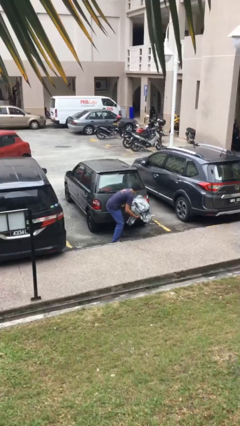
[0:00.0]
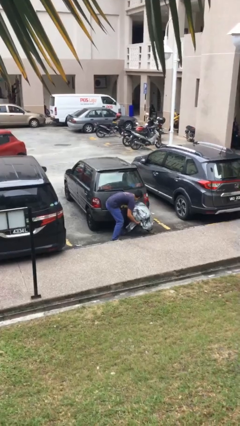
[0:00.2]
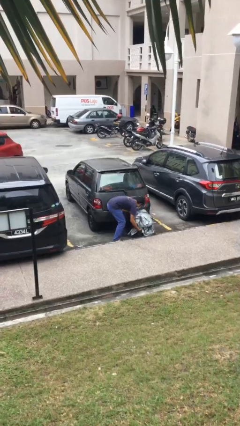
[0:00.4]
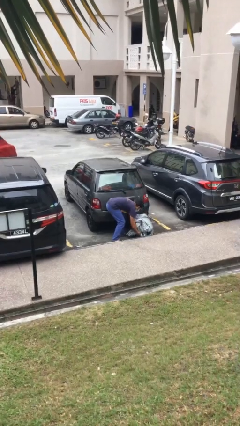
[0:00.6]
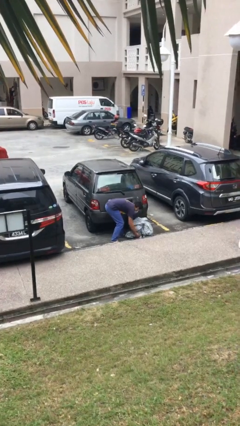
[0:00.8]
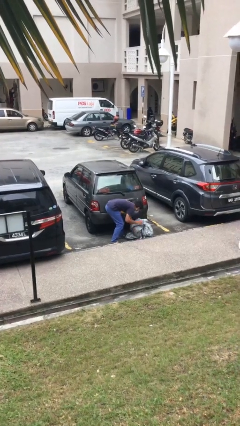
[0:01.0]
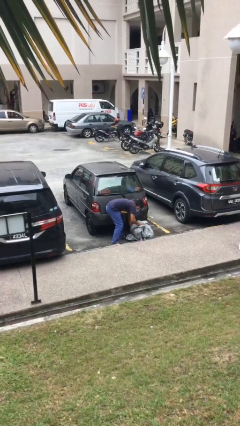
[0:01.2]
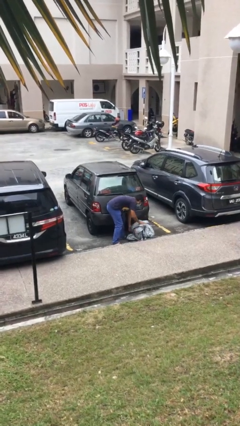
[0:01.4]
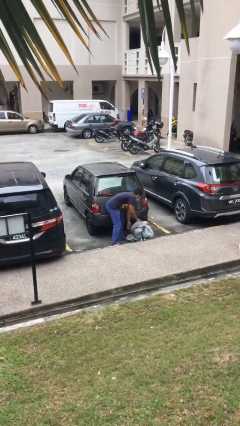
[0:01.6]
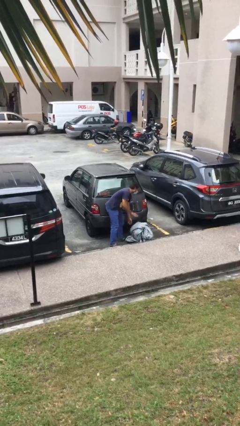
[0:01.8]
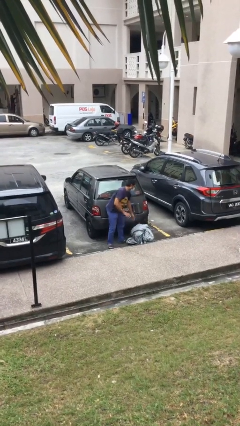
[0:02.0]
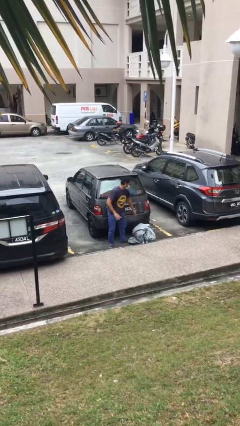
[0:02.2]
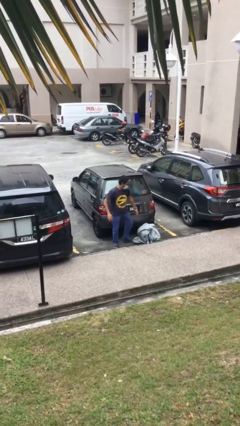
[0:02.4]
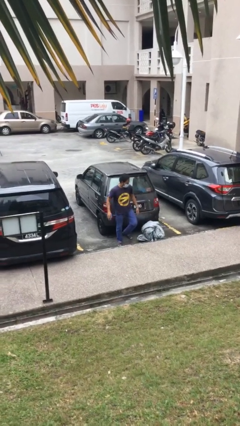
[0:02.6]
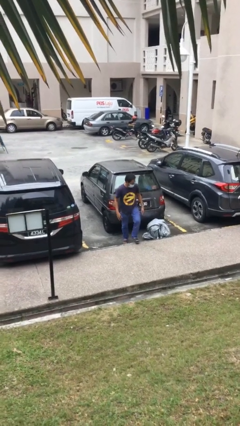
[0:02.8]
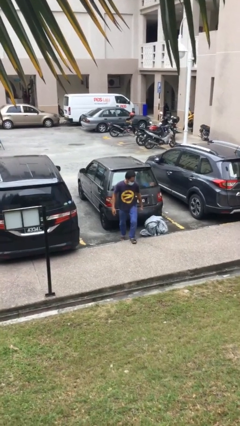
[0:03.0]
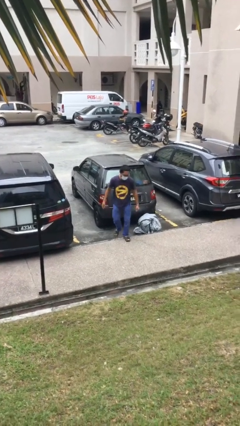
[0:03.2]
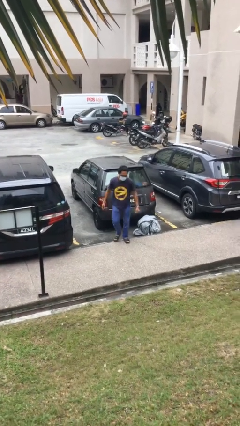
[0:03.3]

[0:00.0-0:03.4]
person puts down object on floor

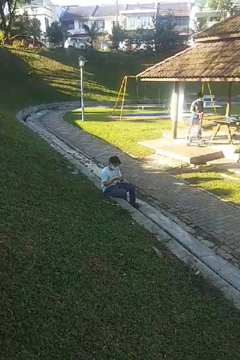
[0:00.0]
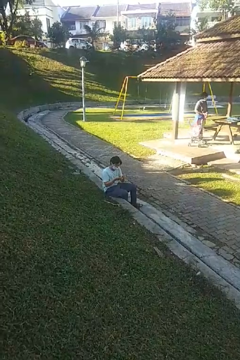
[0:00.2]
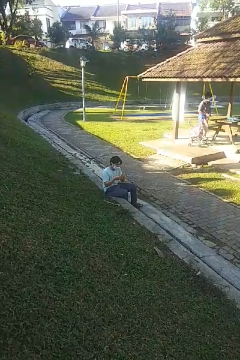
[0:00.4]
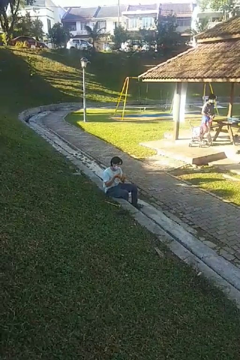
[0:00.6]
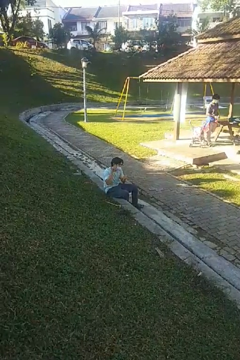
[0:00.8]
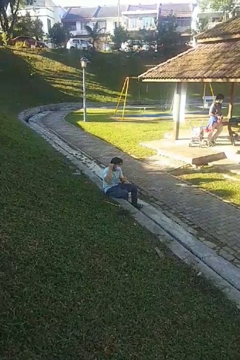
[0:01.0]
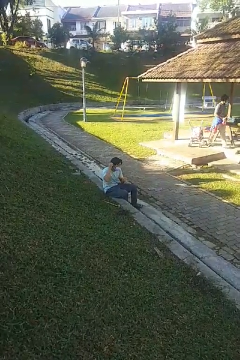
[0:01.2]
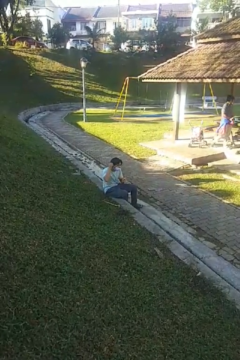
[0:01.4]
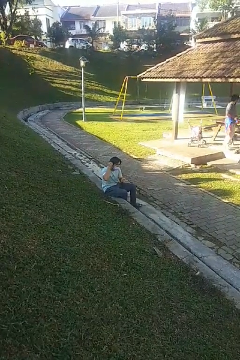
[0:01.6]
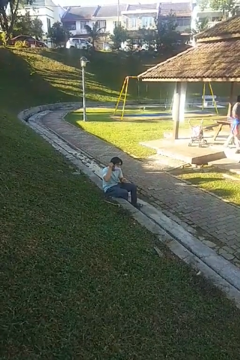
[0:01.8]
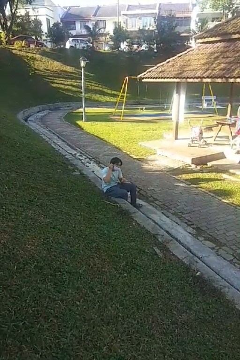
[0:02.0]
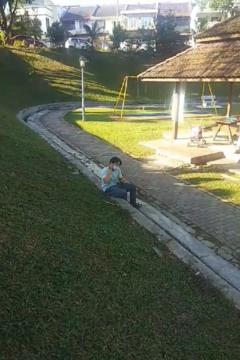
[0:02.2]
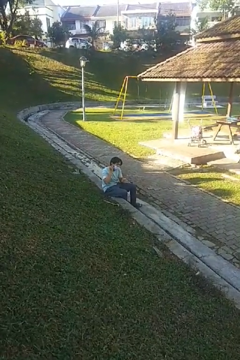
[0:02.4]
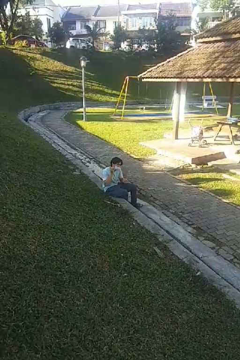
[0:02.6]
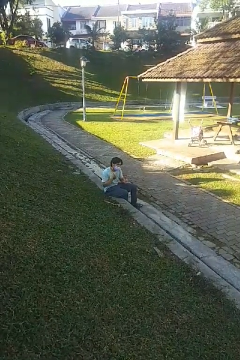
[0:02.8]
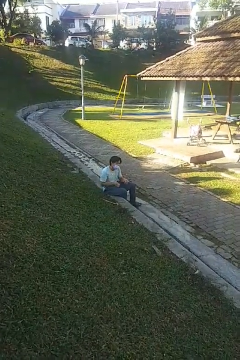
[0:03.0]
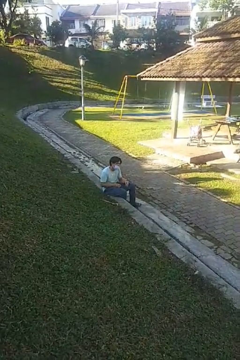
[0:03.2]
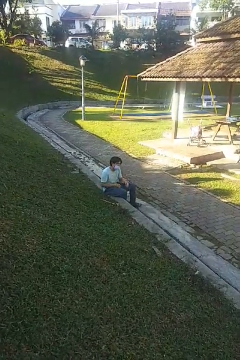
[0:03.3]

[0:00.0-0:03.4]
person puts on earrings

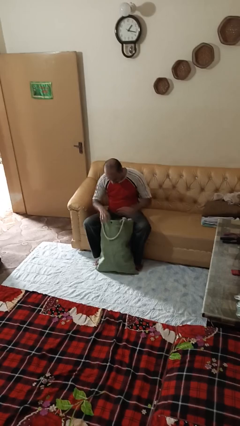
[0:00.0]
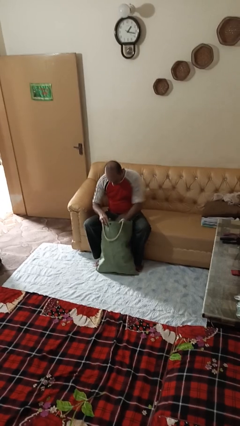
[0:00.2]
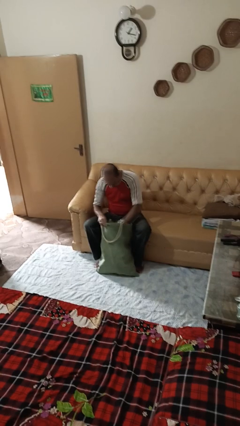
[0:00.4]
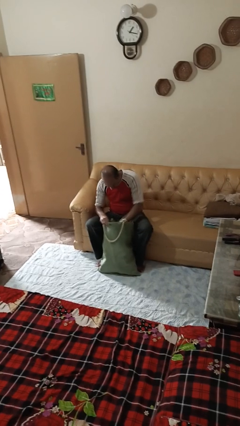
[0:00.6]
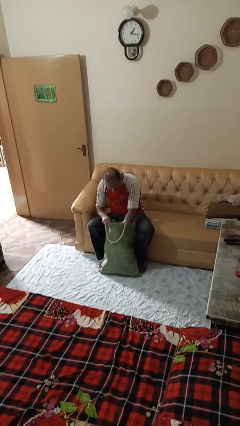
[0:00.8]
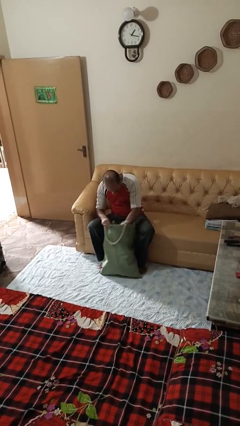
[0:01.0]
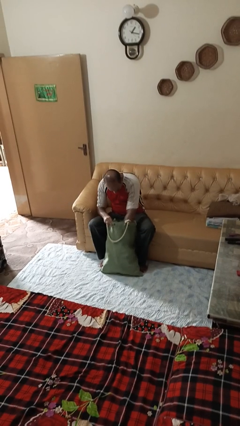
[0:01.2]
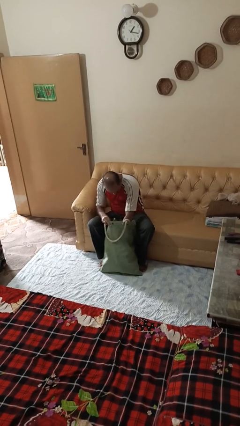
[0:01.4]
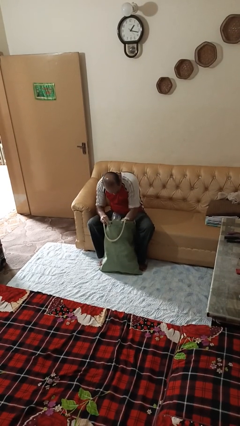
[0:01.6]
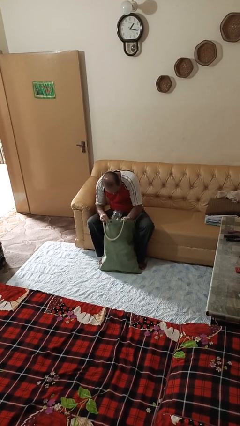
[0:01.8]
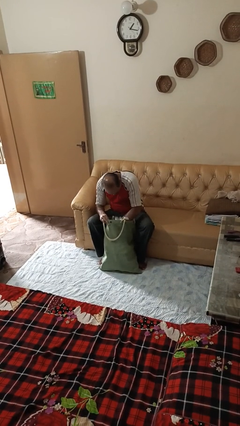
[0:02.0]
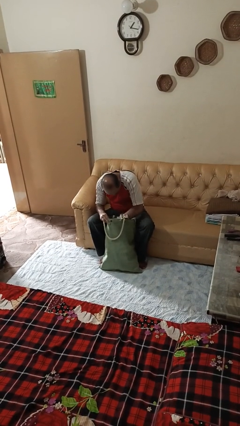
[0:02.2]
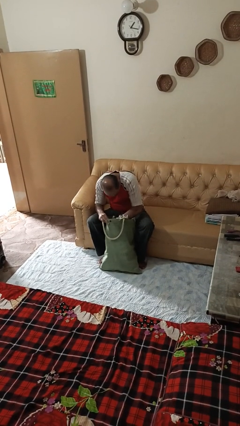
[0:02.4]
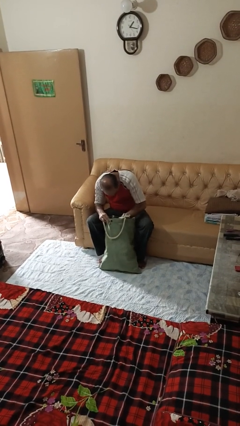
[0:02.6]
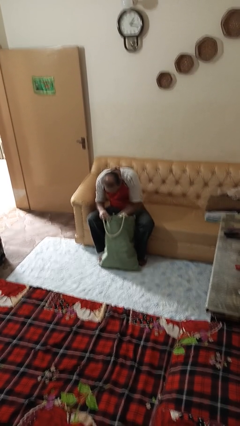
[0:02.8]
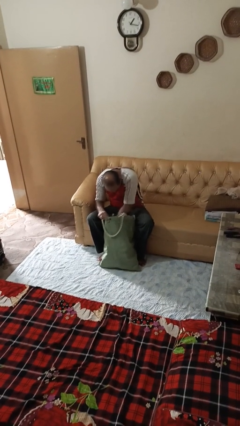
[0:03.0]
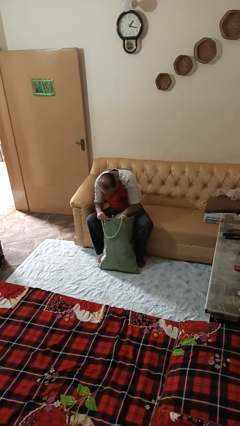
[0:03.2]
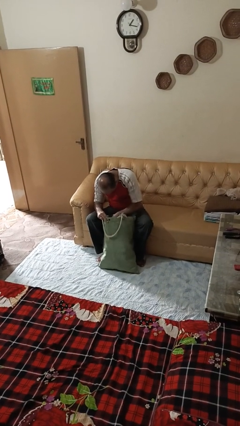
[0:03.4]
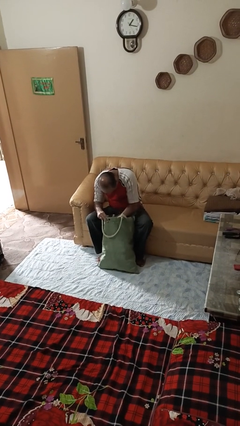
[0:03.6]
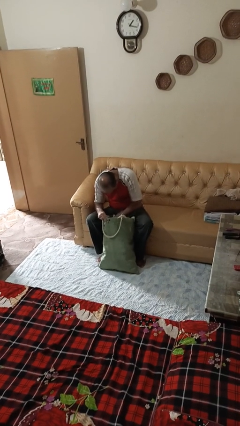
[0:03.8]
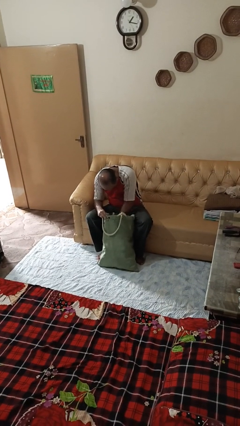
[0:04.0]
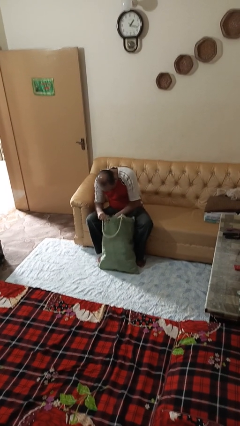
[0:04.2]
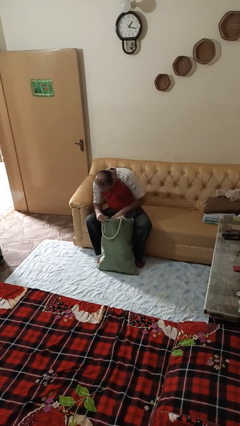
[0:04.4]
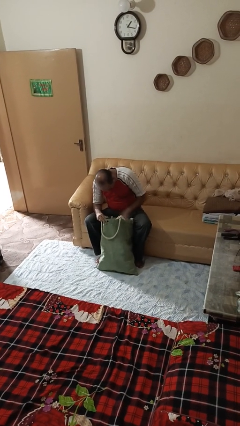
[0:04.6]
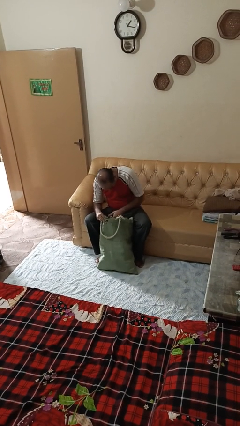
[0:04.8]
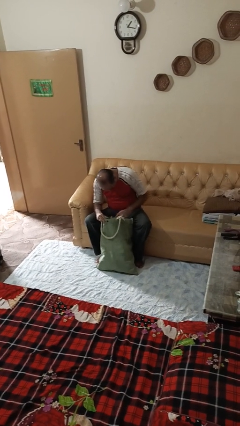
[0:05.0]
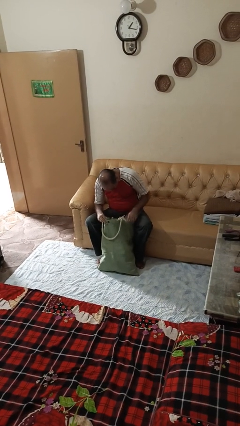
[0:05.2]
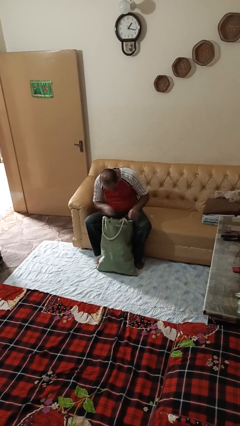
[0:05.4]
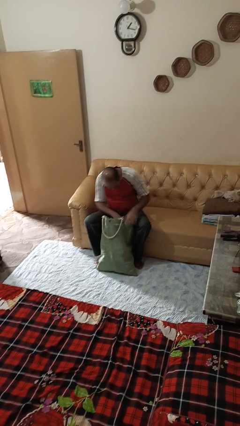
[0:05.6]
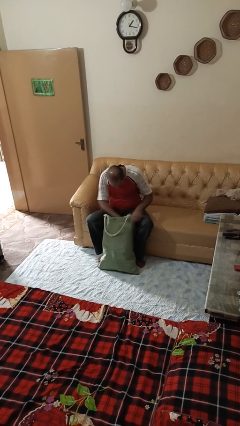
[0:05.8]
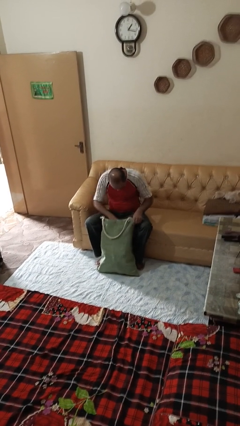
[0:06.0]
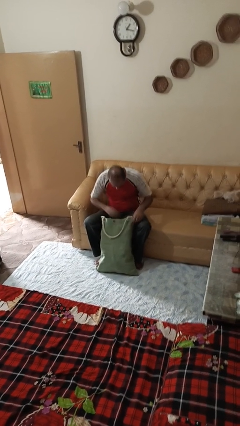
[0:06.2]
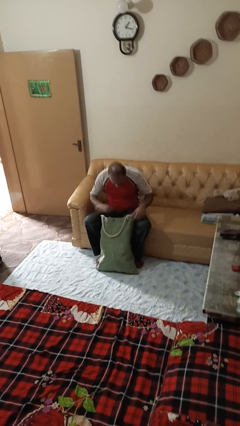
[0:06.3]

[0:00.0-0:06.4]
person searches in bag

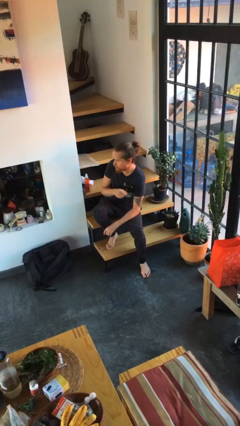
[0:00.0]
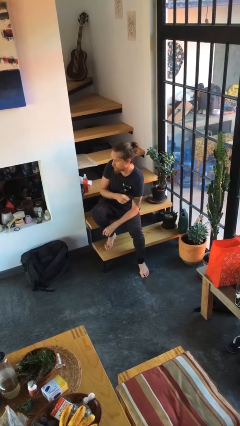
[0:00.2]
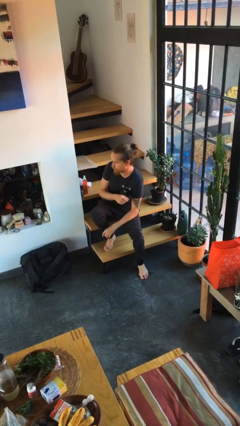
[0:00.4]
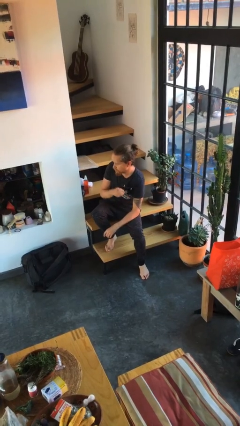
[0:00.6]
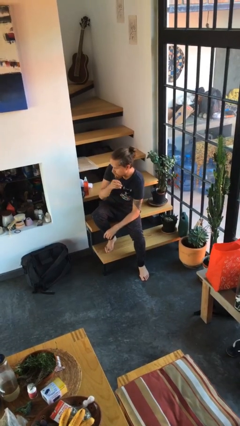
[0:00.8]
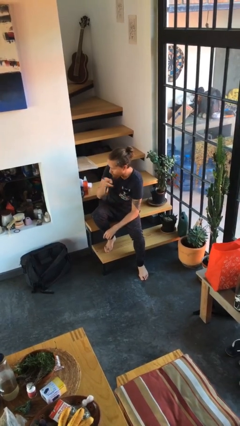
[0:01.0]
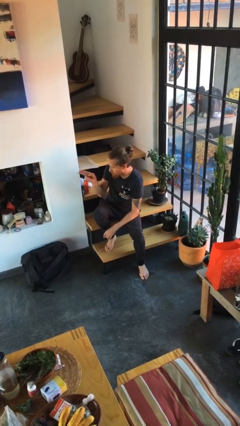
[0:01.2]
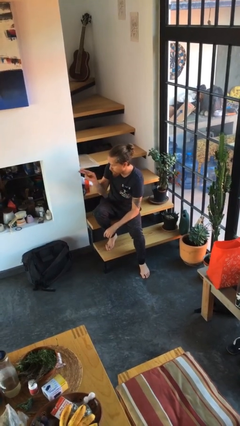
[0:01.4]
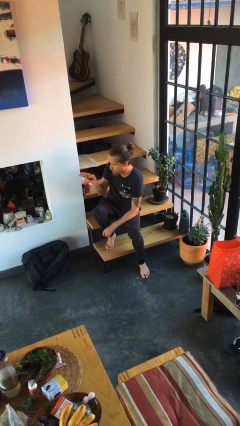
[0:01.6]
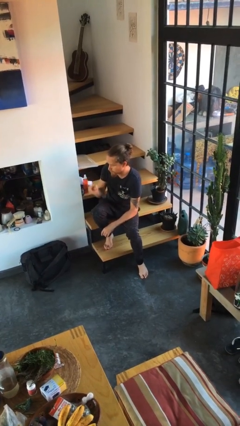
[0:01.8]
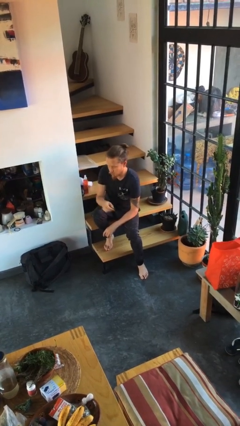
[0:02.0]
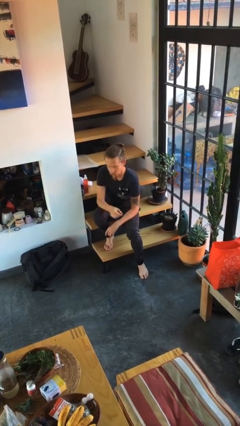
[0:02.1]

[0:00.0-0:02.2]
person gestures swipe right

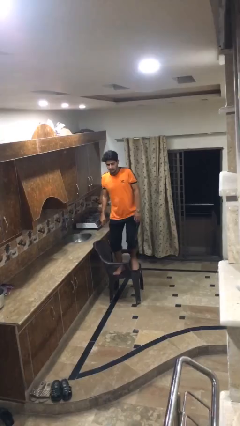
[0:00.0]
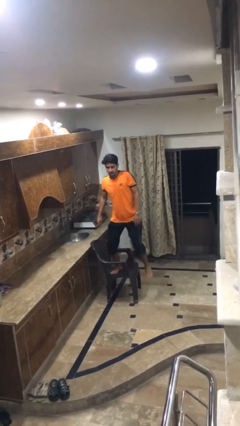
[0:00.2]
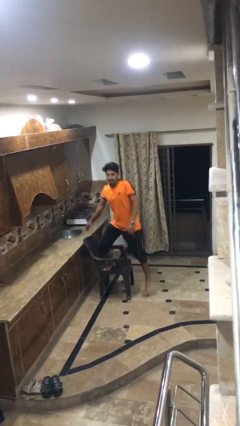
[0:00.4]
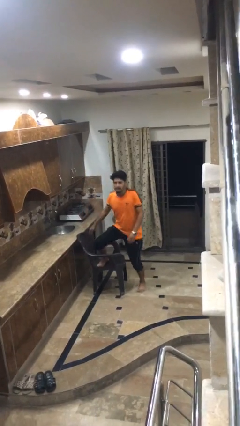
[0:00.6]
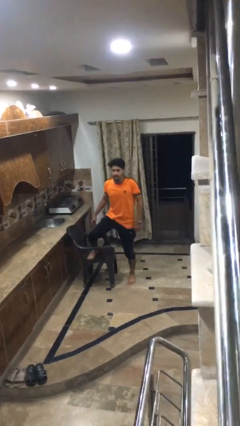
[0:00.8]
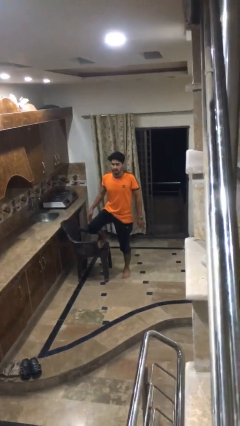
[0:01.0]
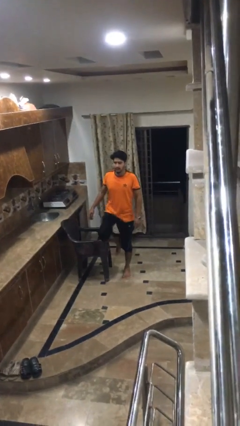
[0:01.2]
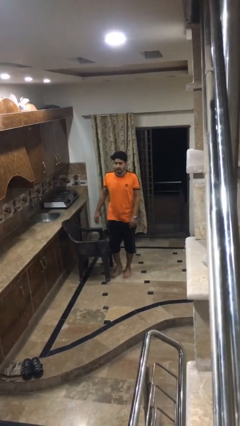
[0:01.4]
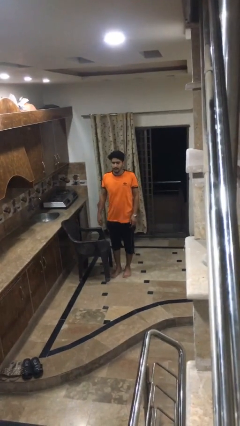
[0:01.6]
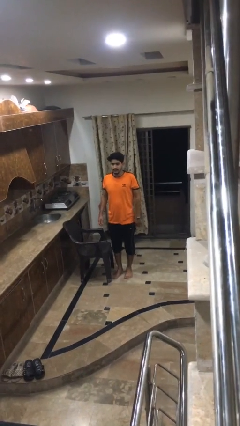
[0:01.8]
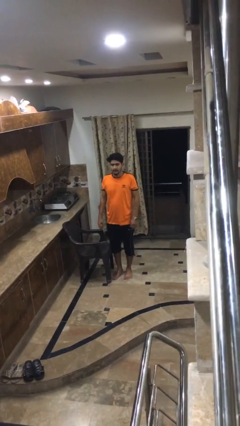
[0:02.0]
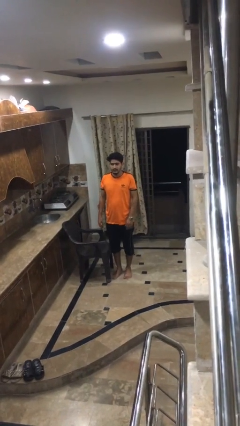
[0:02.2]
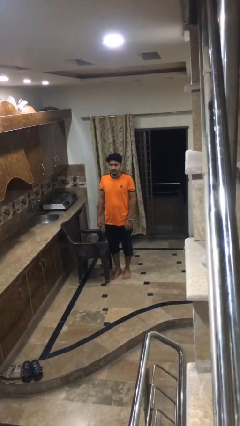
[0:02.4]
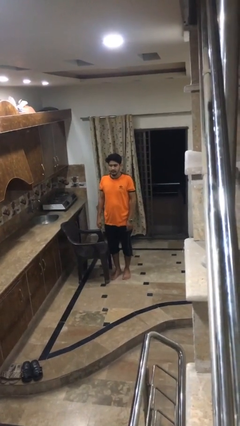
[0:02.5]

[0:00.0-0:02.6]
person climbs off chair

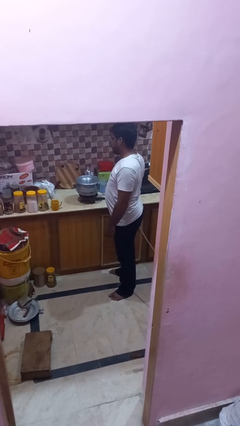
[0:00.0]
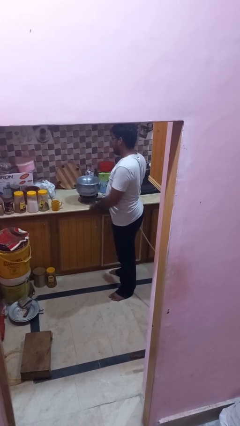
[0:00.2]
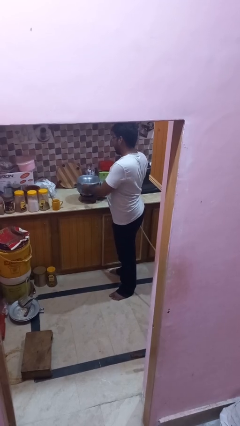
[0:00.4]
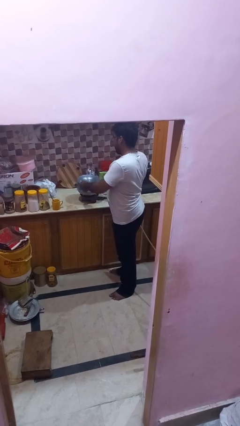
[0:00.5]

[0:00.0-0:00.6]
person burns hand
